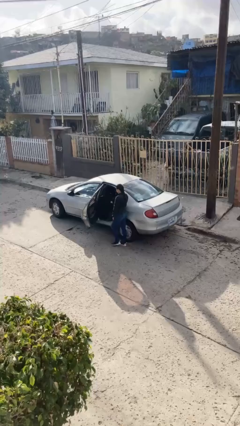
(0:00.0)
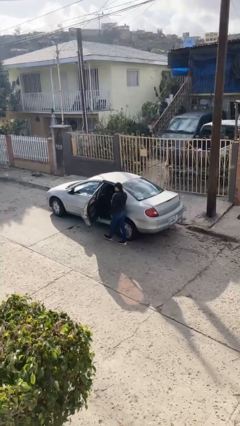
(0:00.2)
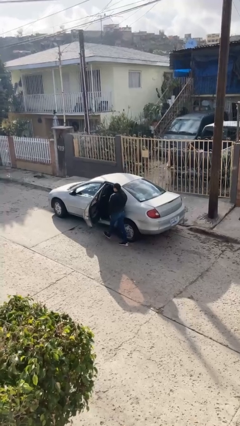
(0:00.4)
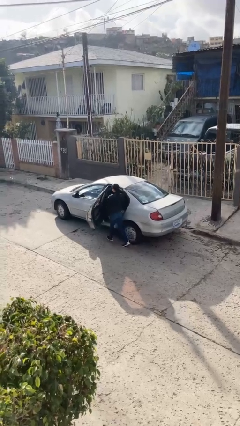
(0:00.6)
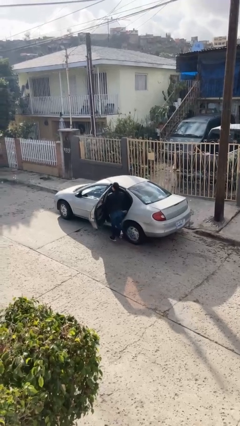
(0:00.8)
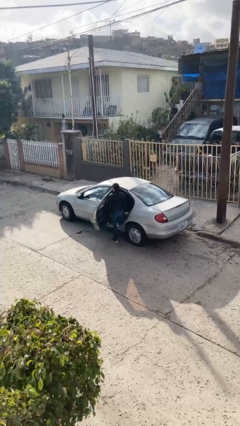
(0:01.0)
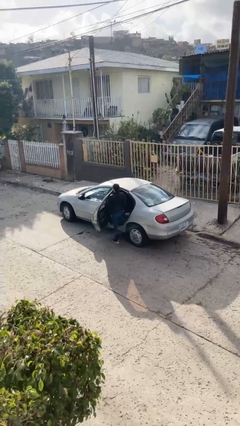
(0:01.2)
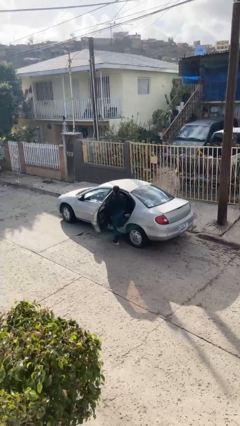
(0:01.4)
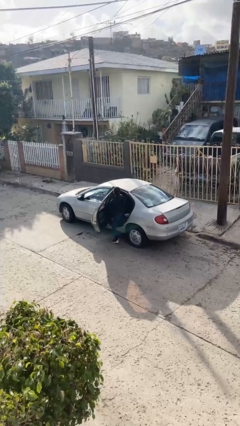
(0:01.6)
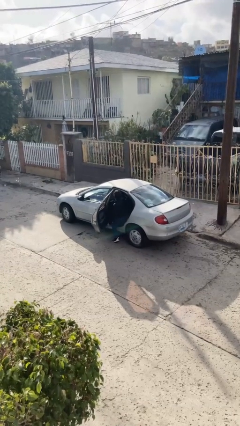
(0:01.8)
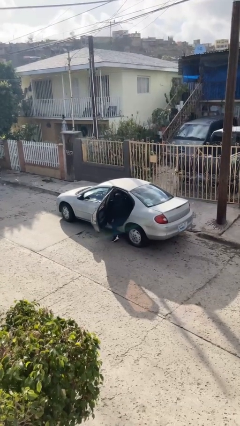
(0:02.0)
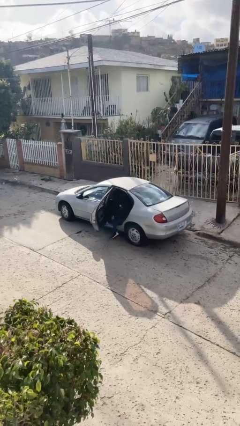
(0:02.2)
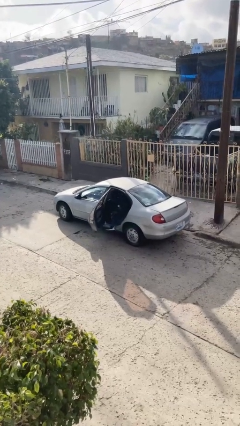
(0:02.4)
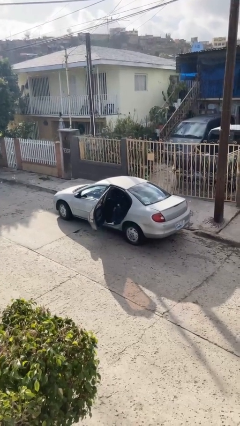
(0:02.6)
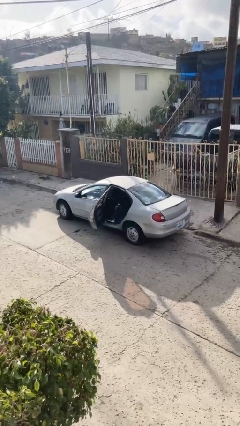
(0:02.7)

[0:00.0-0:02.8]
person enters car

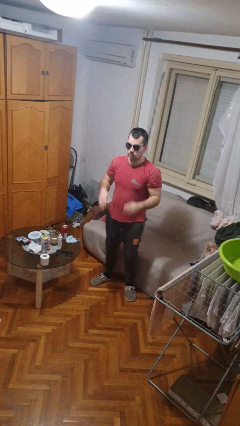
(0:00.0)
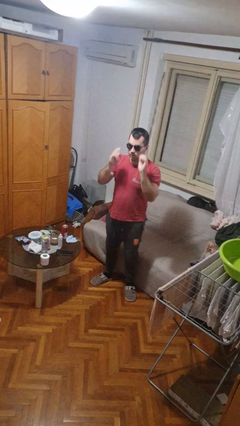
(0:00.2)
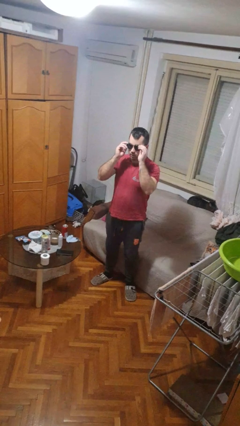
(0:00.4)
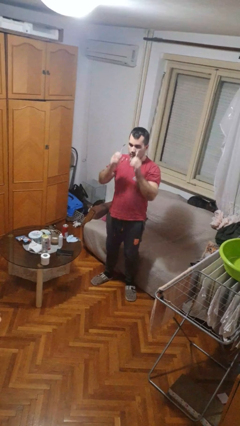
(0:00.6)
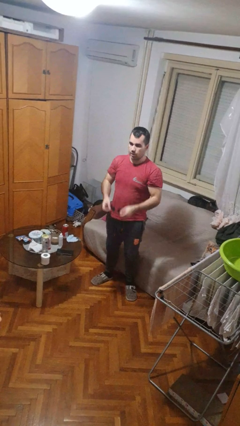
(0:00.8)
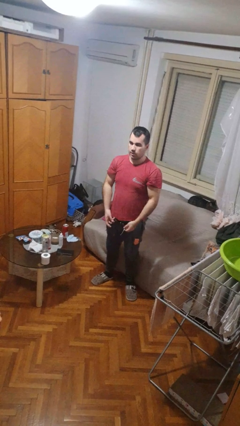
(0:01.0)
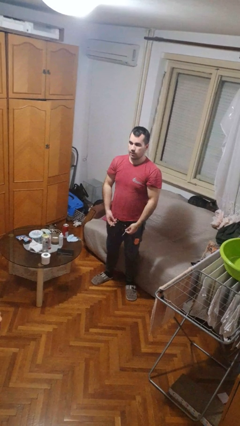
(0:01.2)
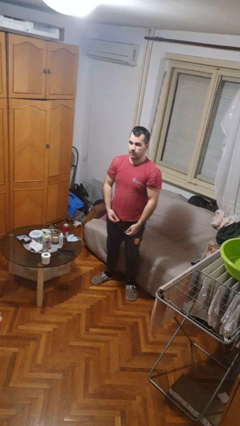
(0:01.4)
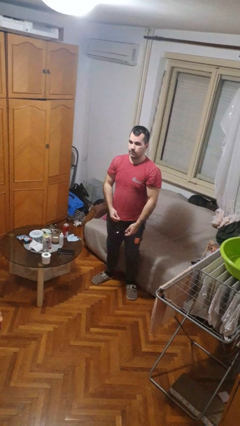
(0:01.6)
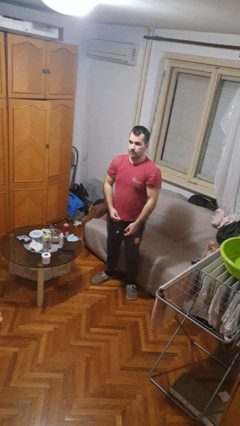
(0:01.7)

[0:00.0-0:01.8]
person takes off sunglasses

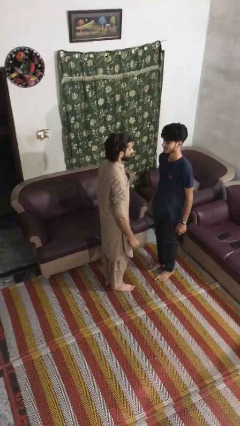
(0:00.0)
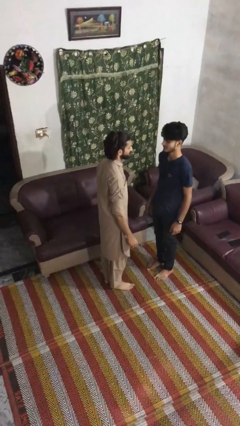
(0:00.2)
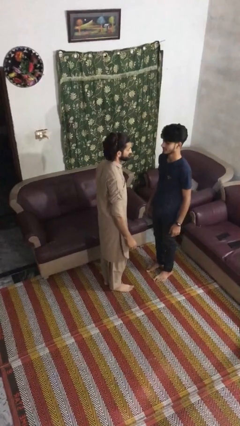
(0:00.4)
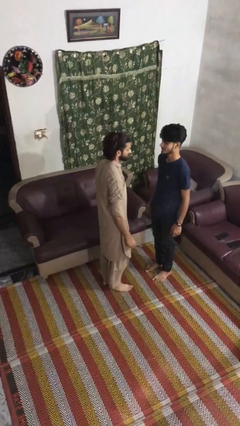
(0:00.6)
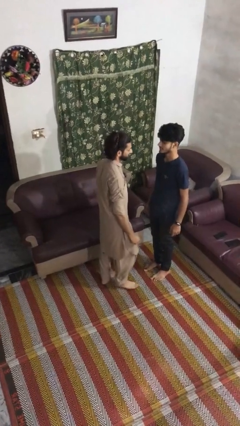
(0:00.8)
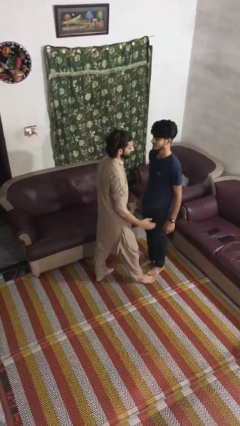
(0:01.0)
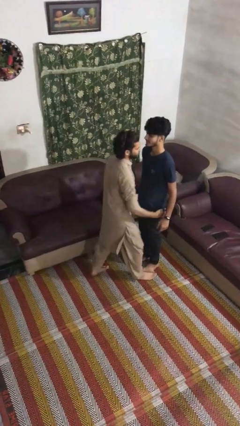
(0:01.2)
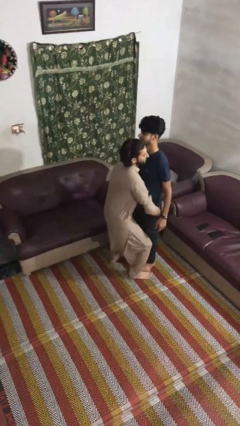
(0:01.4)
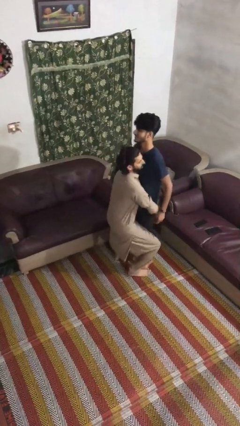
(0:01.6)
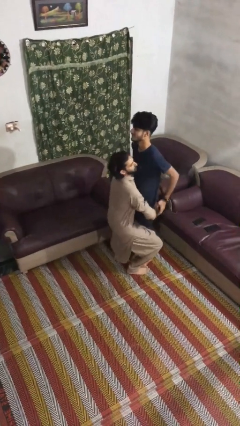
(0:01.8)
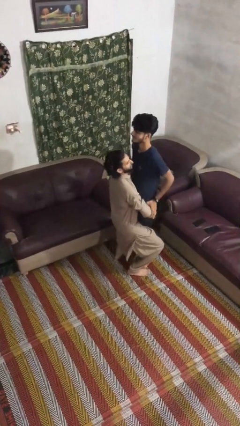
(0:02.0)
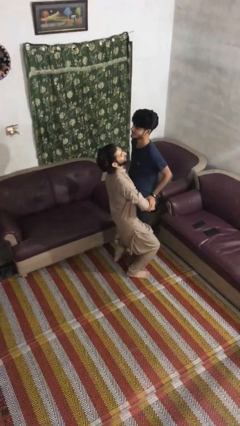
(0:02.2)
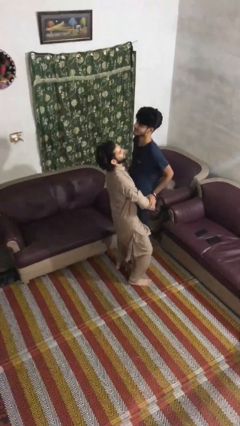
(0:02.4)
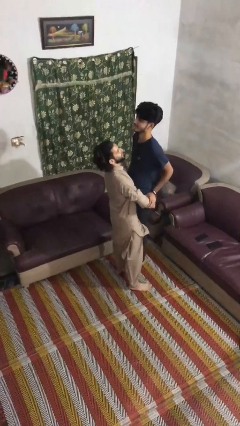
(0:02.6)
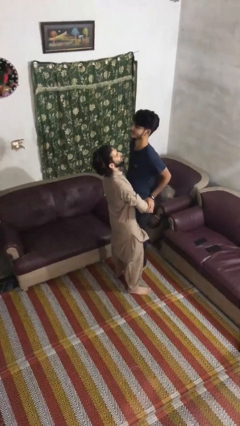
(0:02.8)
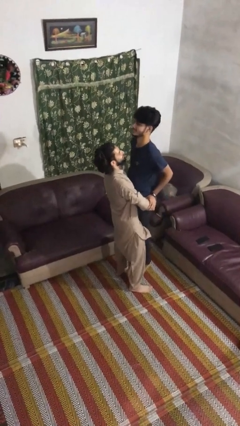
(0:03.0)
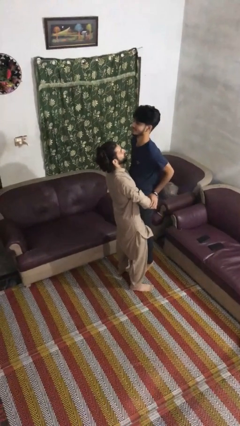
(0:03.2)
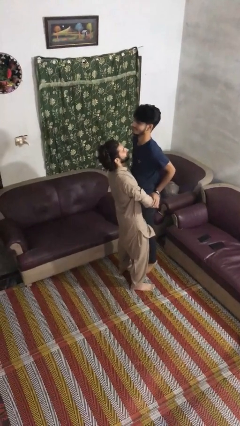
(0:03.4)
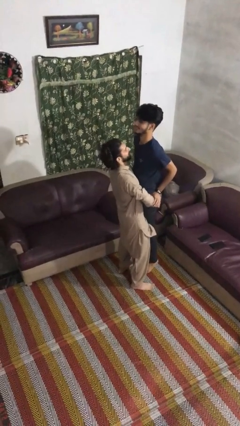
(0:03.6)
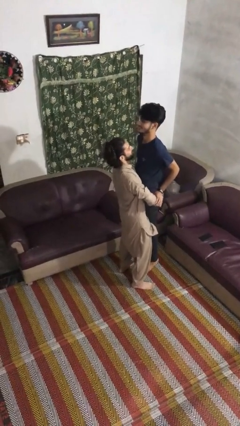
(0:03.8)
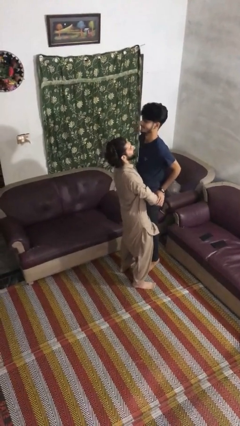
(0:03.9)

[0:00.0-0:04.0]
person picks up person

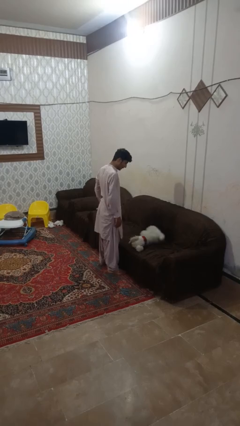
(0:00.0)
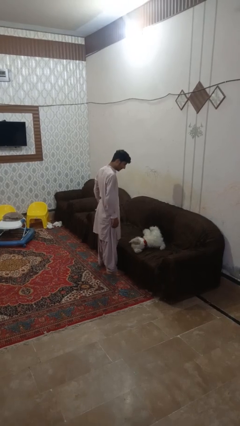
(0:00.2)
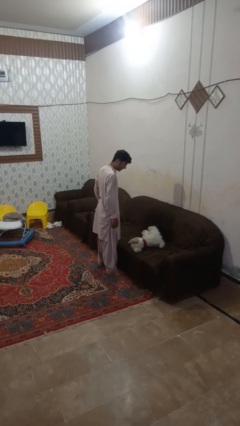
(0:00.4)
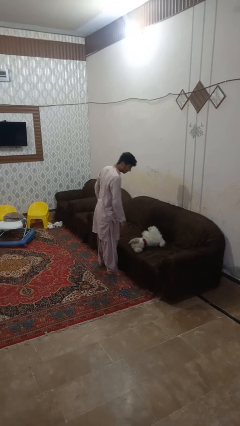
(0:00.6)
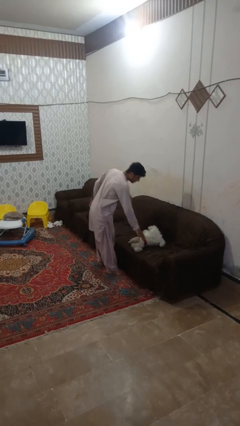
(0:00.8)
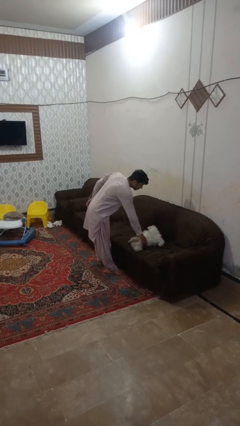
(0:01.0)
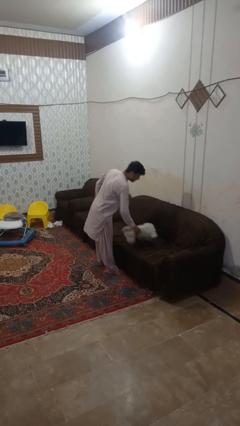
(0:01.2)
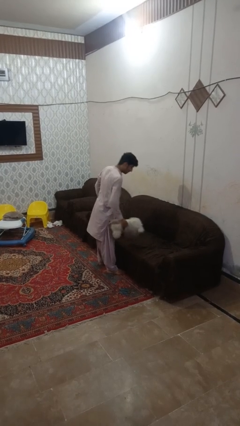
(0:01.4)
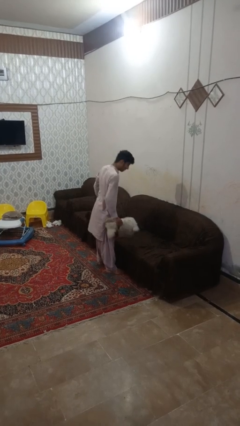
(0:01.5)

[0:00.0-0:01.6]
person picks up object from couch

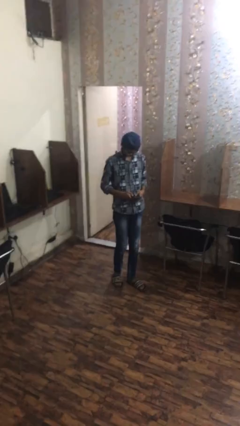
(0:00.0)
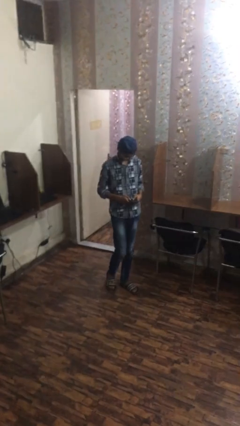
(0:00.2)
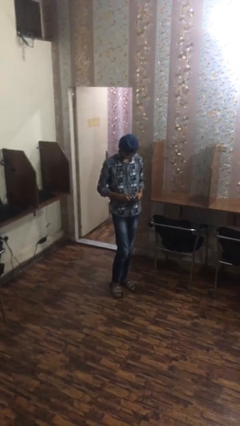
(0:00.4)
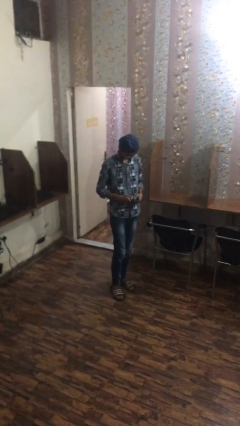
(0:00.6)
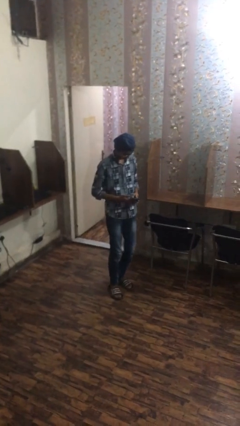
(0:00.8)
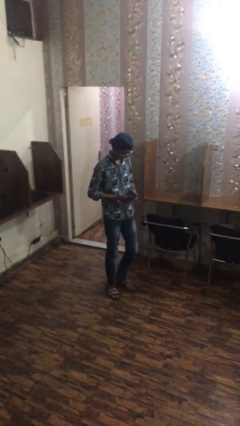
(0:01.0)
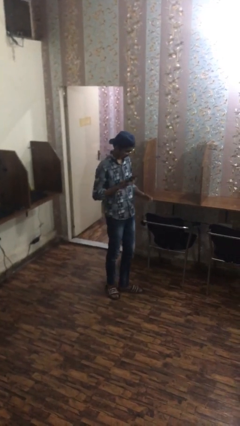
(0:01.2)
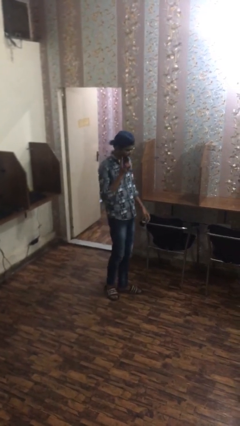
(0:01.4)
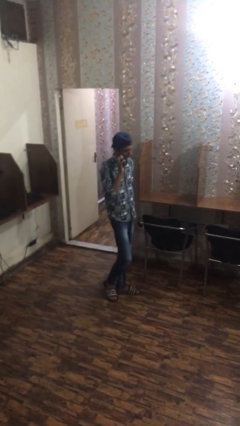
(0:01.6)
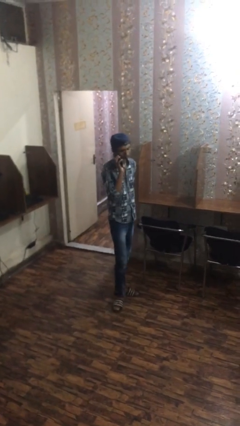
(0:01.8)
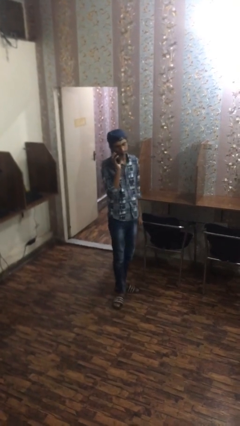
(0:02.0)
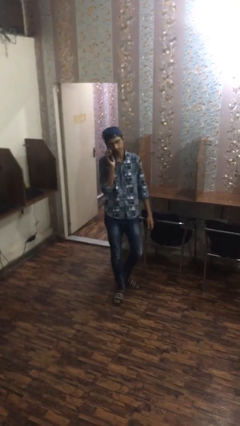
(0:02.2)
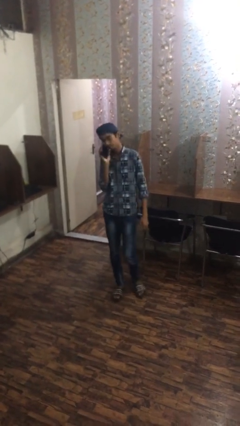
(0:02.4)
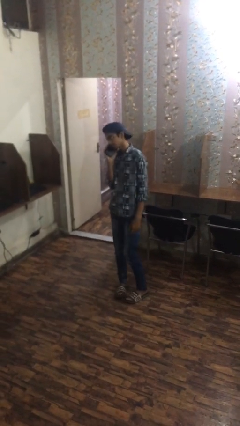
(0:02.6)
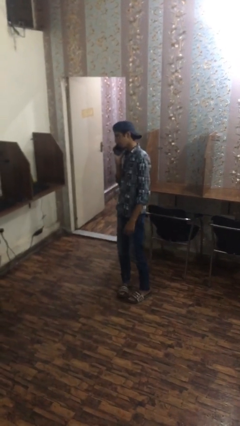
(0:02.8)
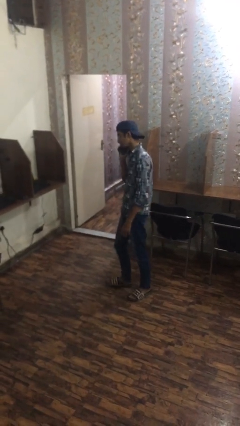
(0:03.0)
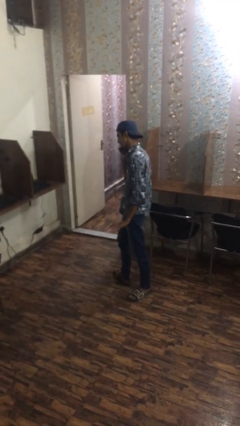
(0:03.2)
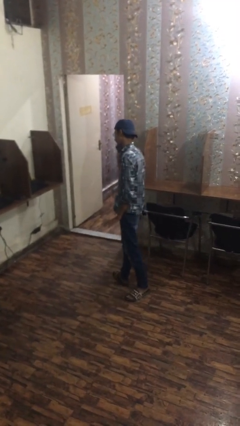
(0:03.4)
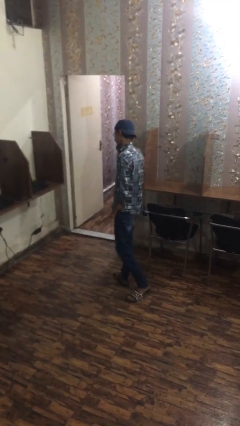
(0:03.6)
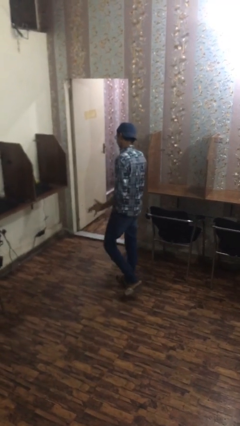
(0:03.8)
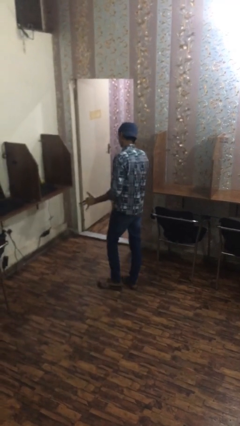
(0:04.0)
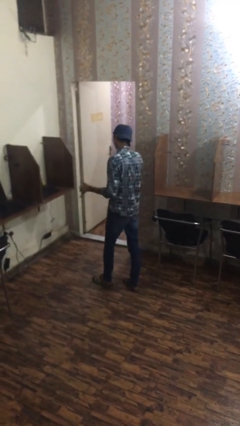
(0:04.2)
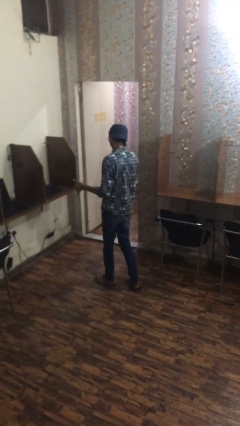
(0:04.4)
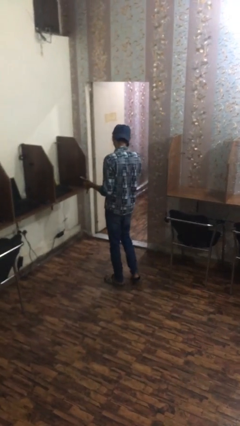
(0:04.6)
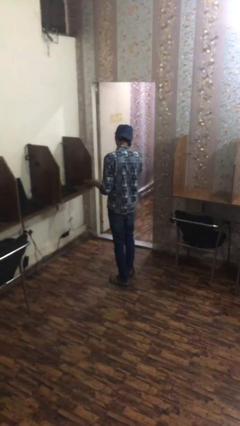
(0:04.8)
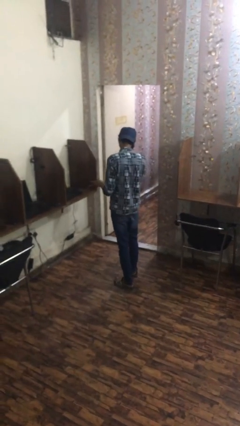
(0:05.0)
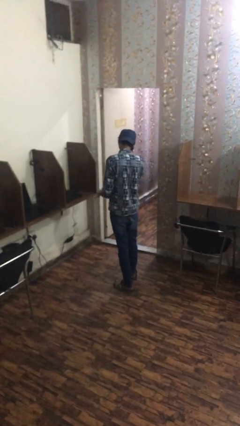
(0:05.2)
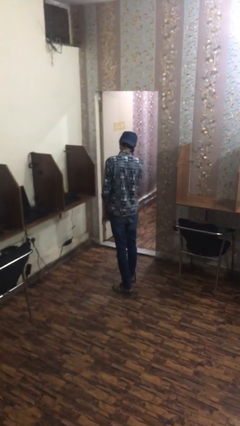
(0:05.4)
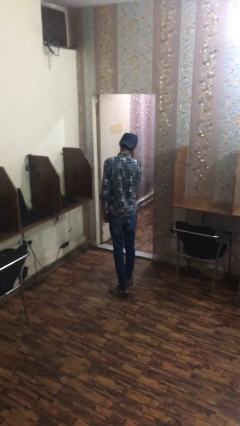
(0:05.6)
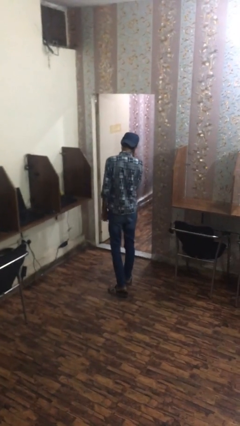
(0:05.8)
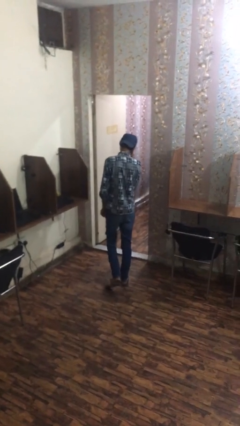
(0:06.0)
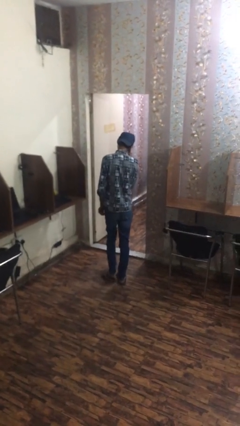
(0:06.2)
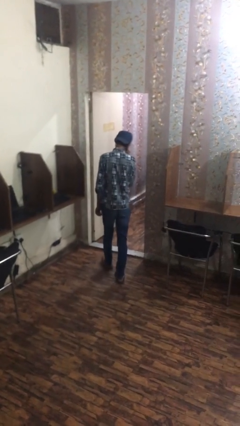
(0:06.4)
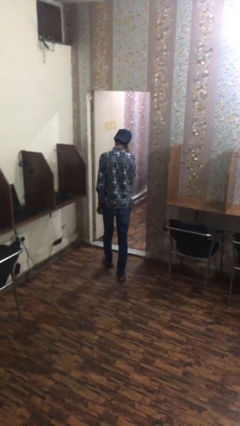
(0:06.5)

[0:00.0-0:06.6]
person talks on phone

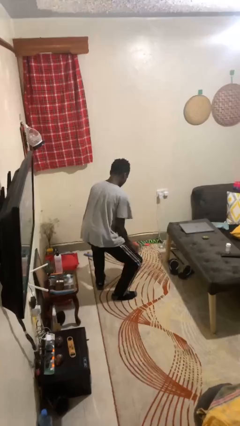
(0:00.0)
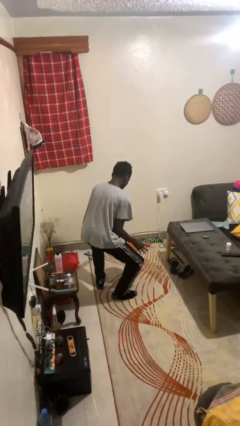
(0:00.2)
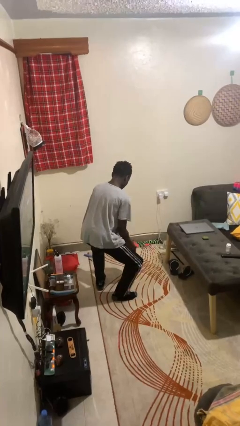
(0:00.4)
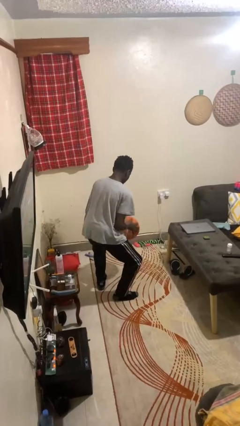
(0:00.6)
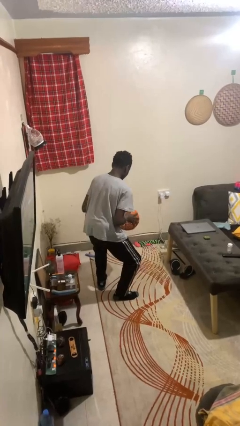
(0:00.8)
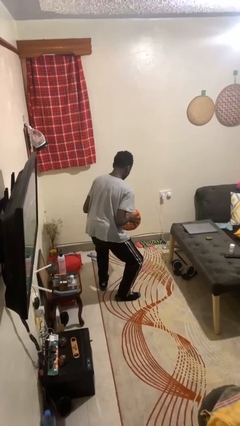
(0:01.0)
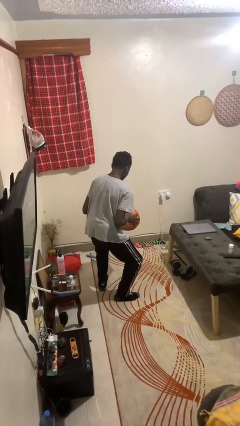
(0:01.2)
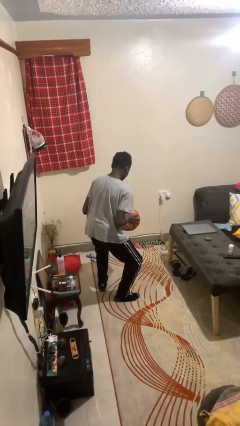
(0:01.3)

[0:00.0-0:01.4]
person bounces ball on floor
